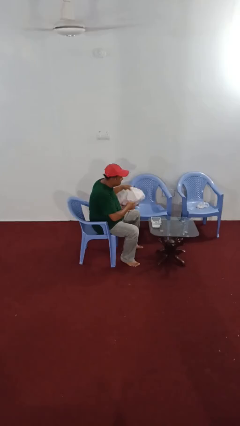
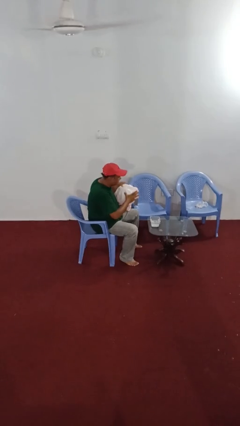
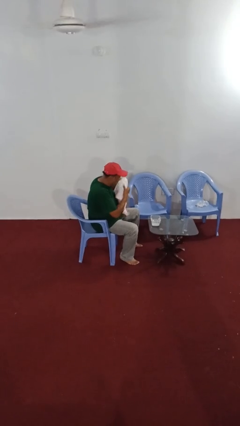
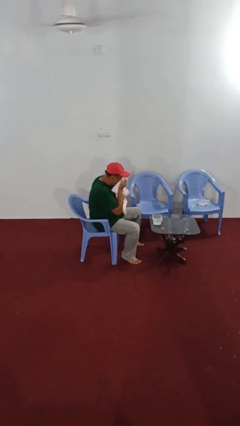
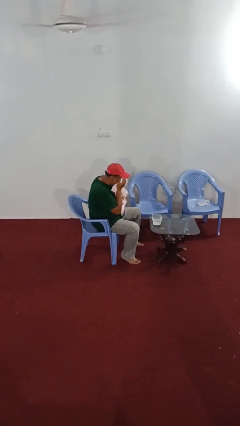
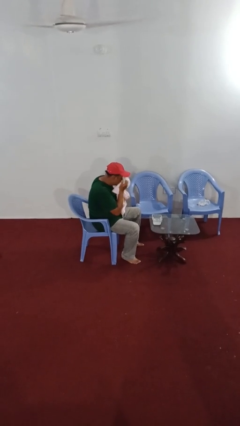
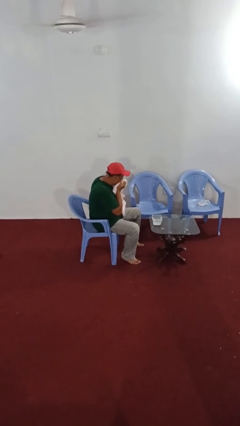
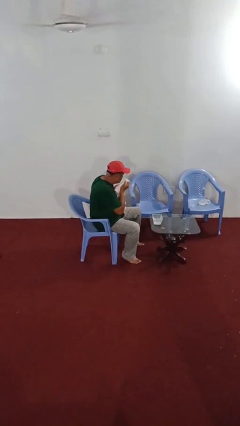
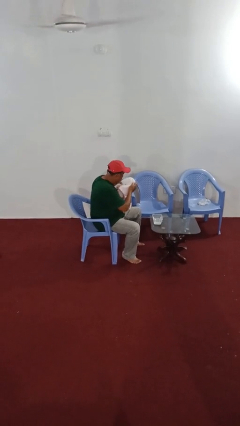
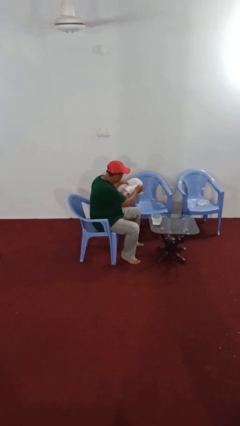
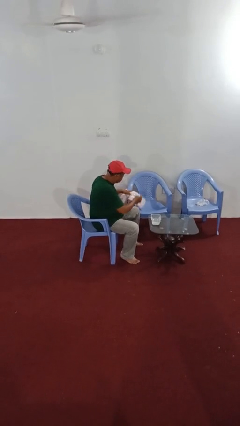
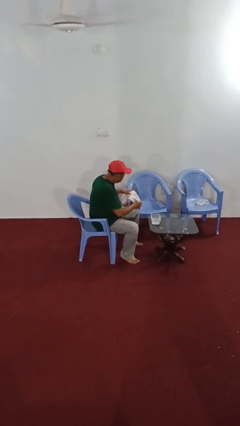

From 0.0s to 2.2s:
person dries face with towel

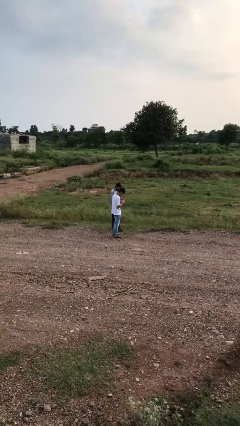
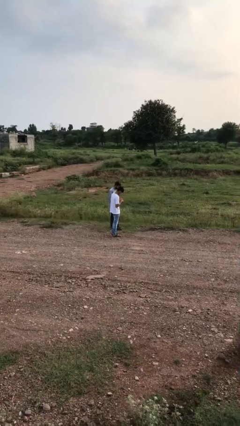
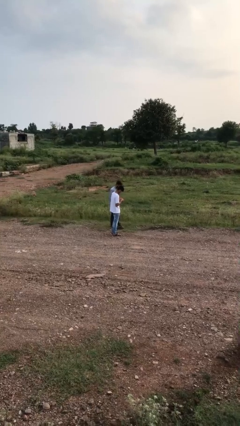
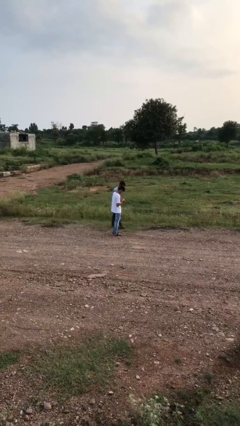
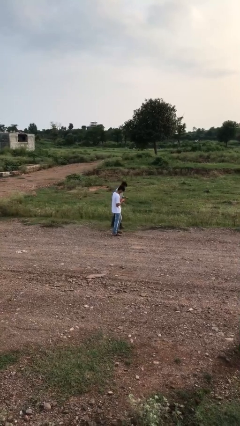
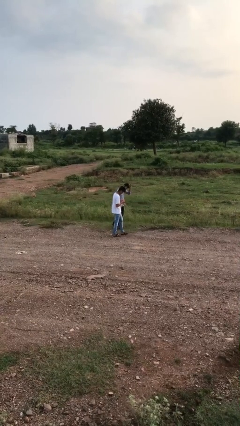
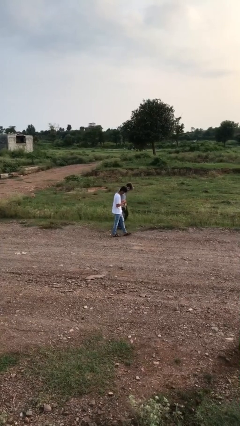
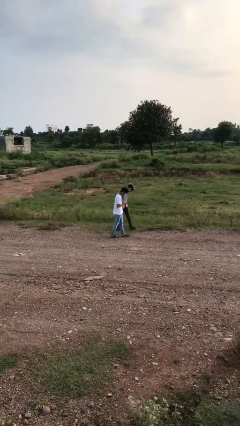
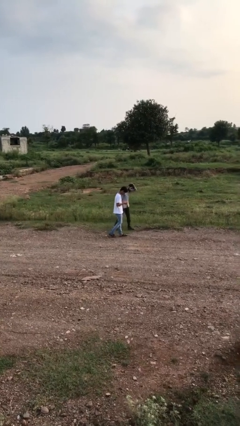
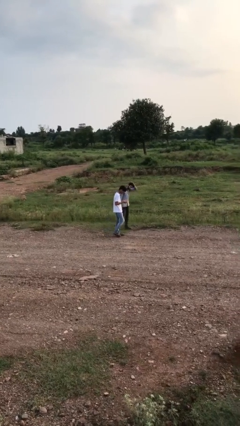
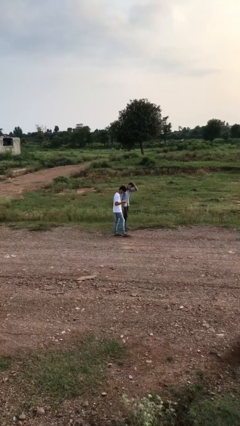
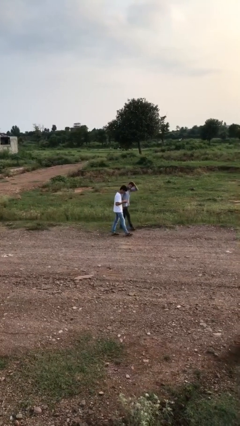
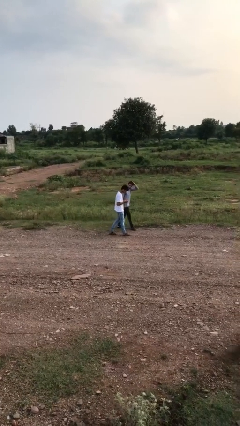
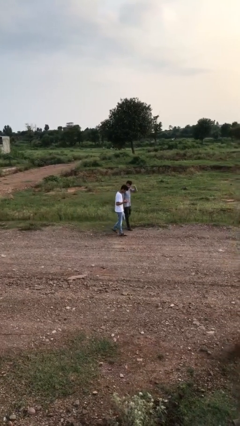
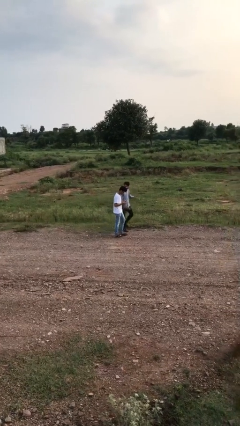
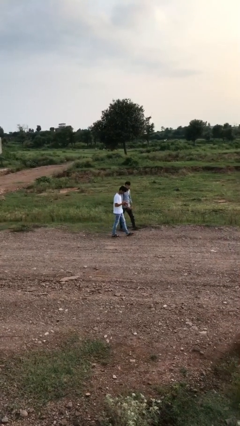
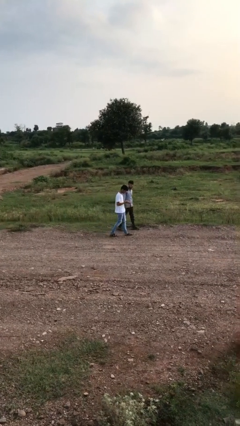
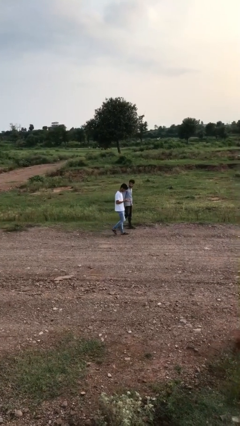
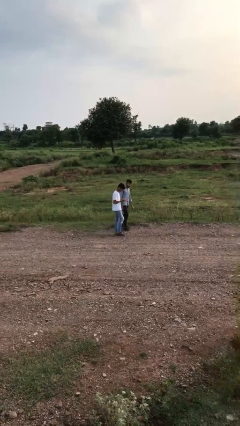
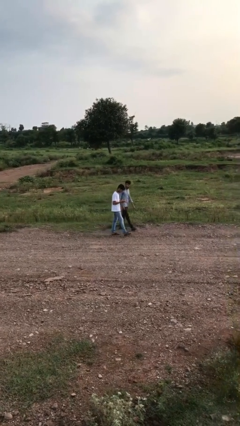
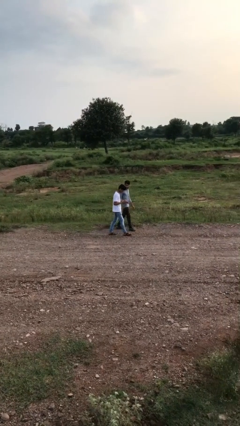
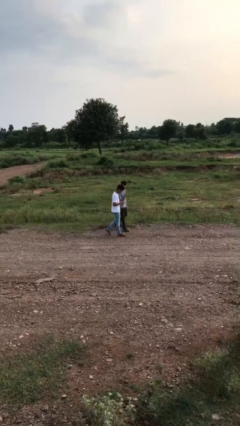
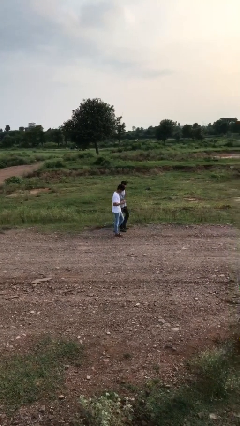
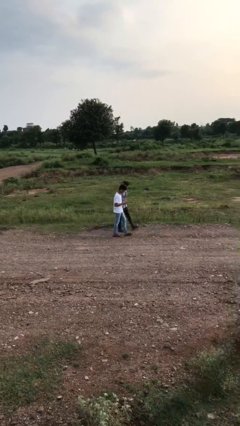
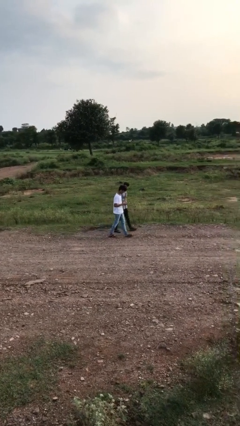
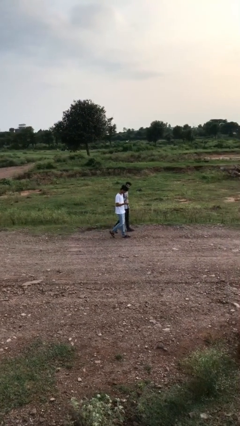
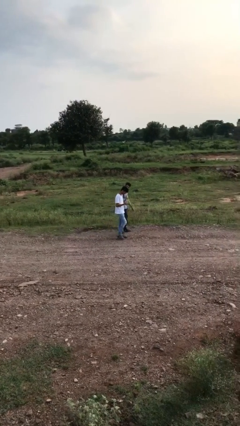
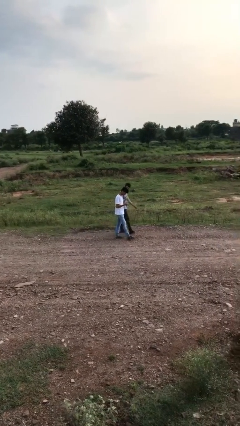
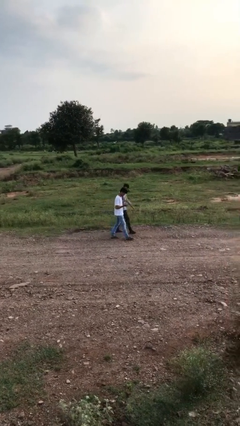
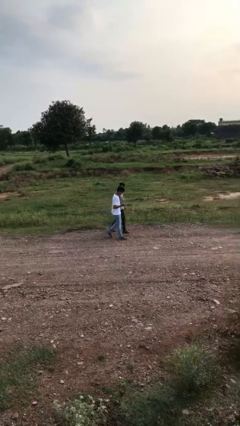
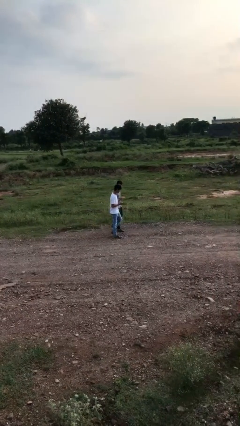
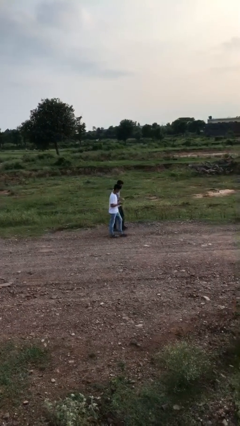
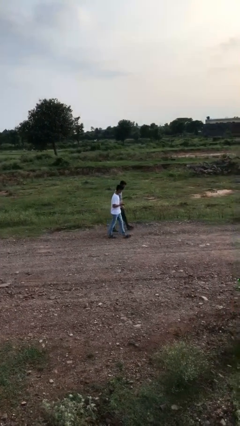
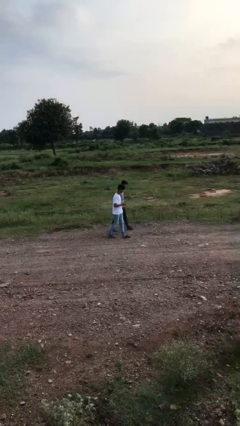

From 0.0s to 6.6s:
person talks to person

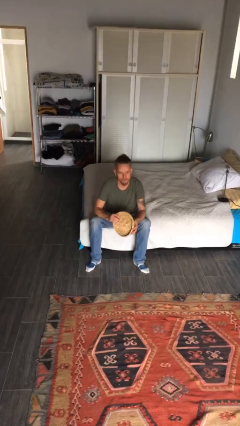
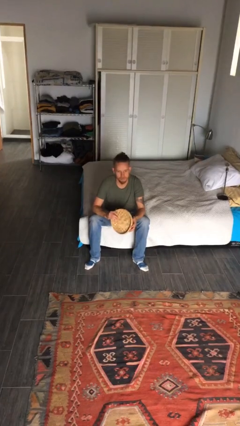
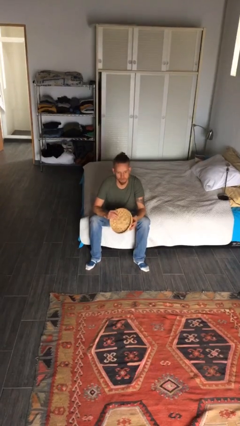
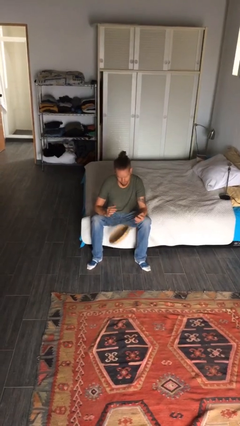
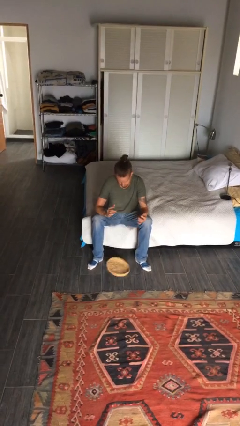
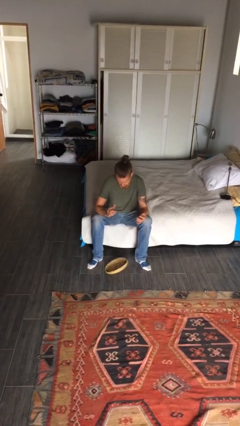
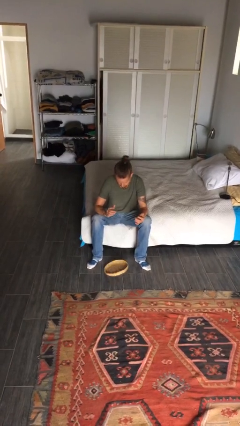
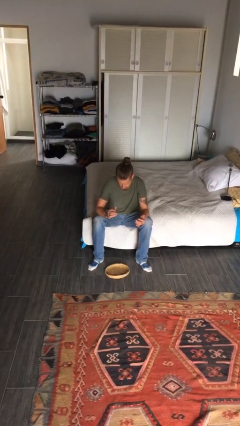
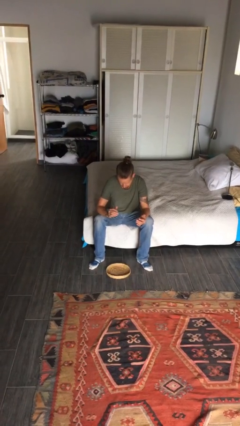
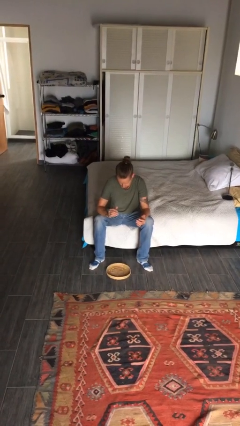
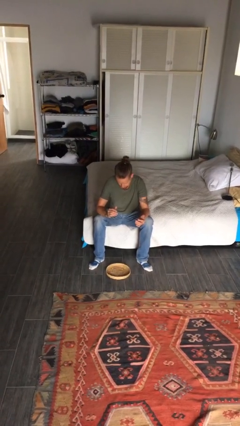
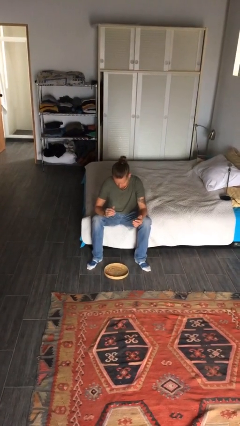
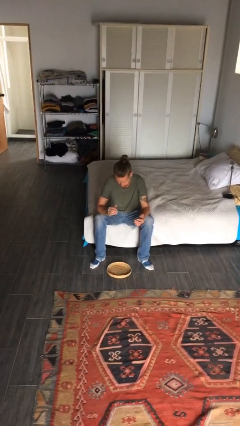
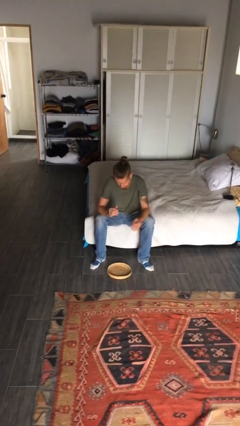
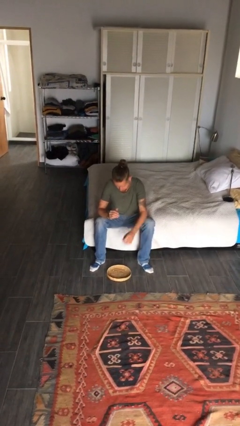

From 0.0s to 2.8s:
person drops object

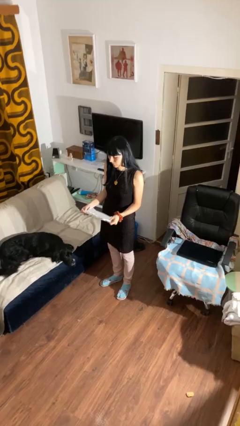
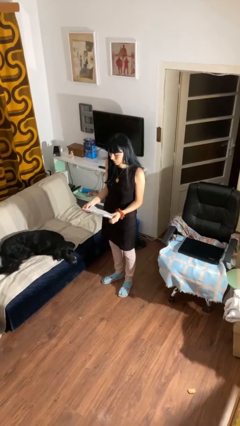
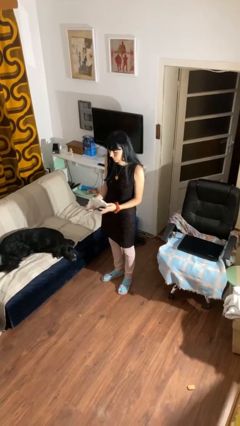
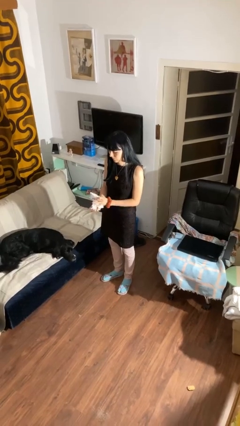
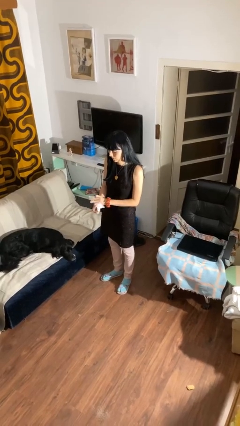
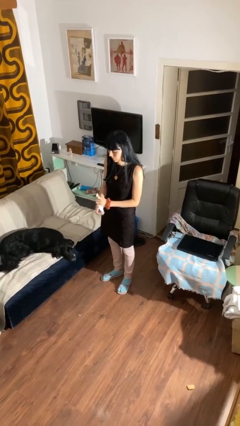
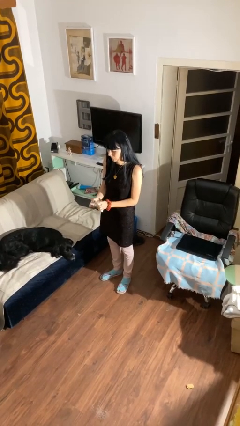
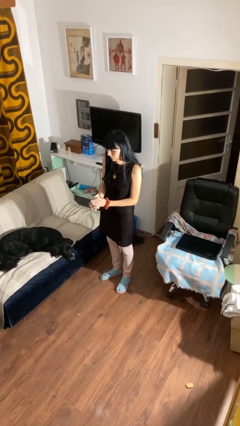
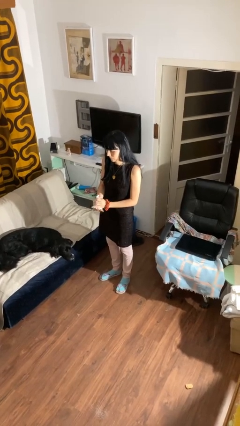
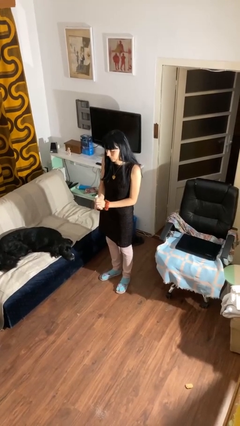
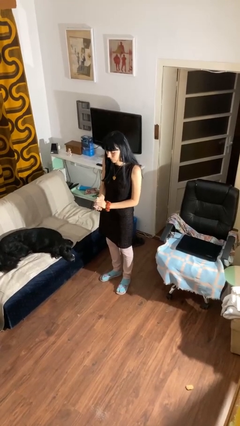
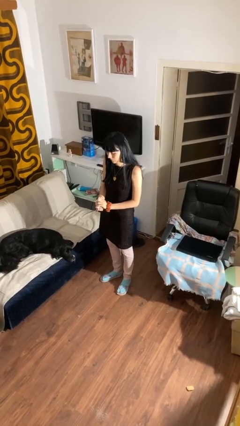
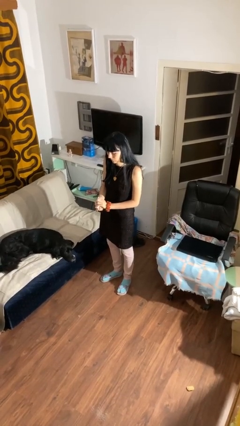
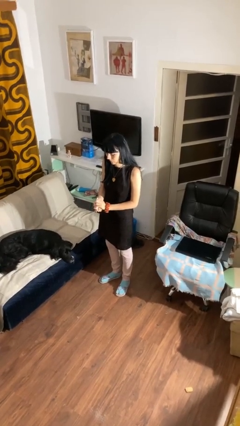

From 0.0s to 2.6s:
person crumples paper

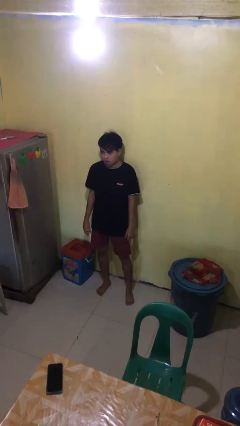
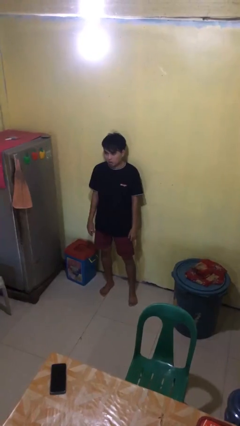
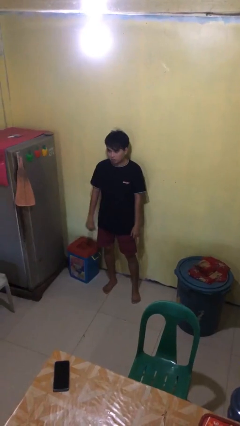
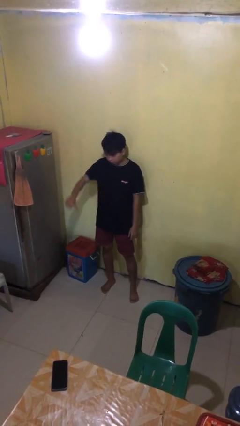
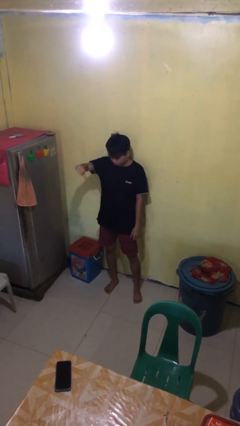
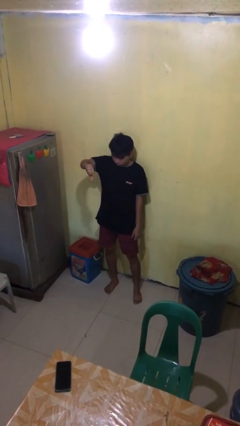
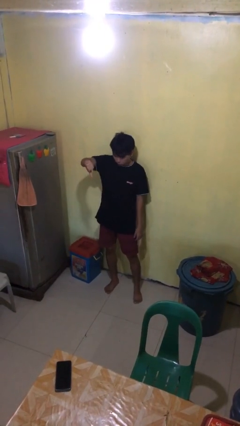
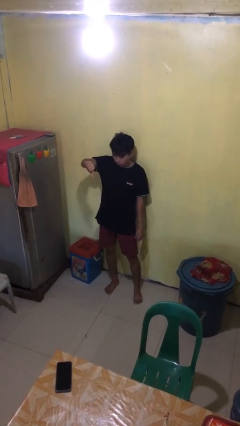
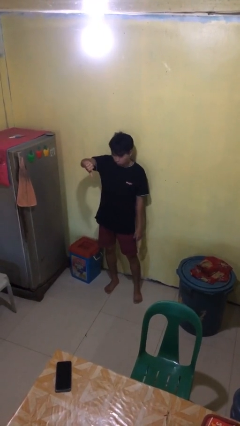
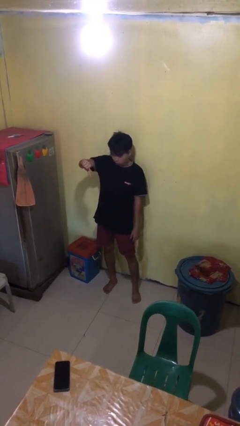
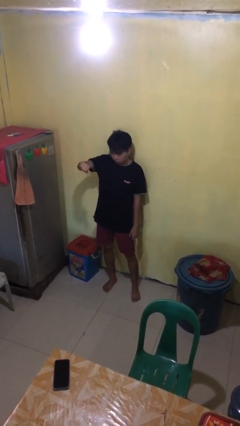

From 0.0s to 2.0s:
person gestures thumbs down

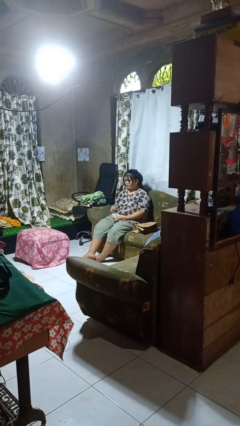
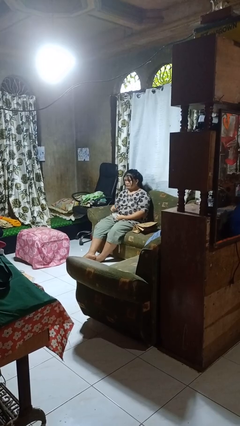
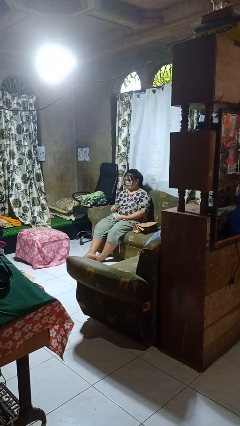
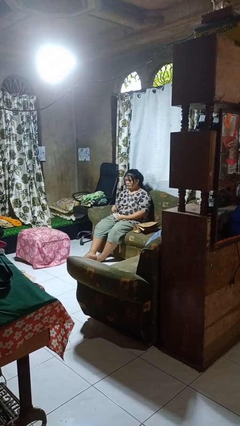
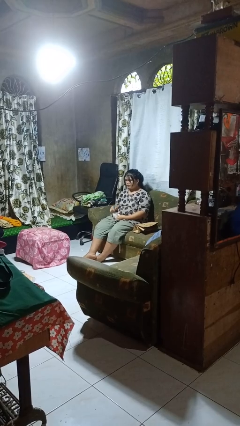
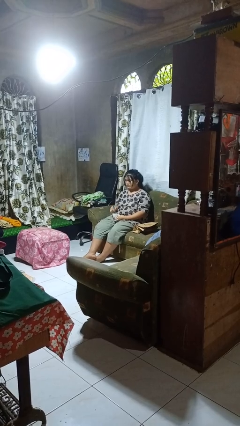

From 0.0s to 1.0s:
person stirs mug

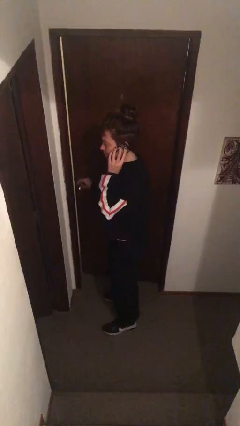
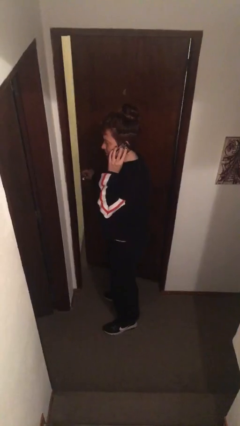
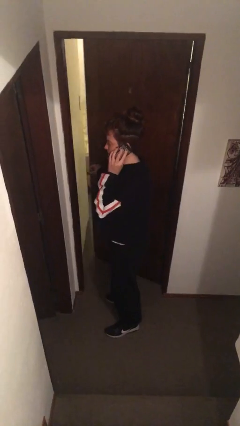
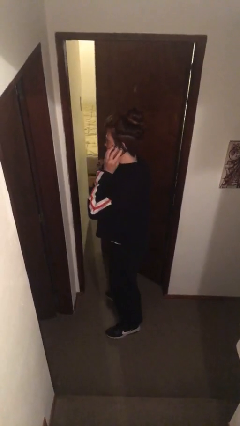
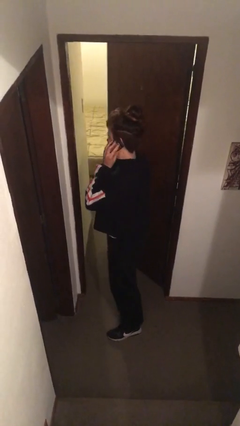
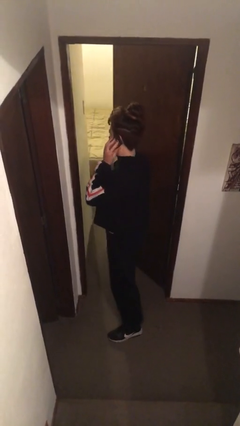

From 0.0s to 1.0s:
person opens facility door
